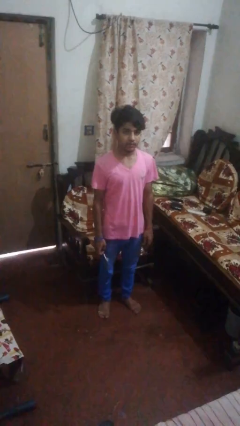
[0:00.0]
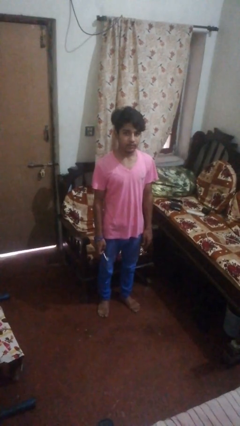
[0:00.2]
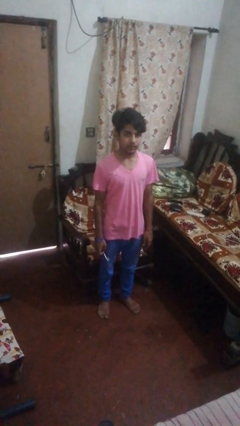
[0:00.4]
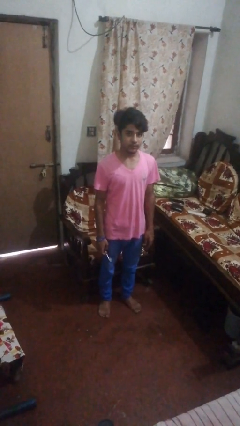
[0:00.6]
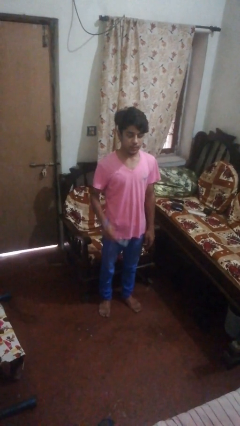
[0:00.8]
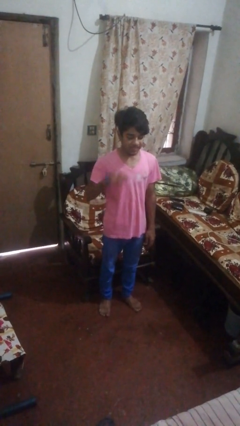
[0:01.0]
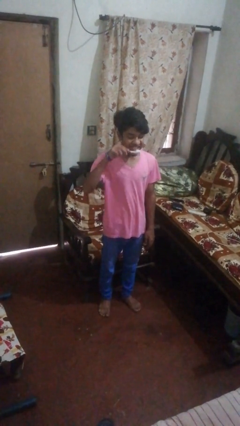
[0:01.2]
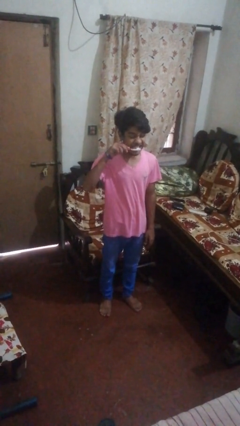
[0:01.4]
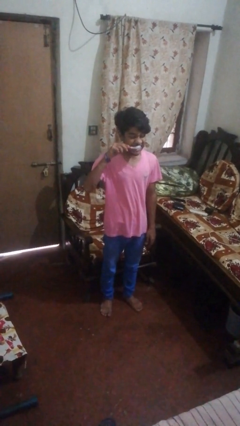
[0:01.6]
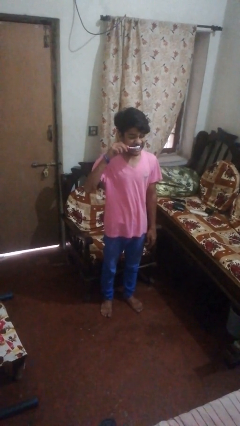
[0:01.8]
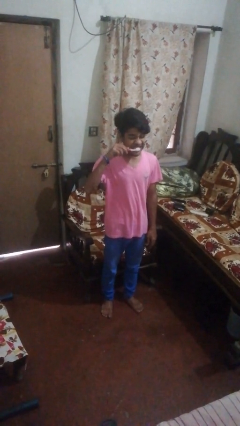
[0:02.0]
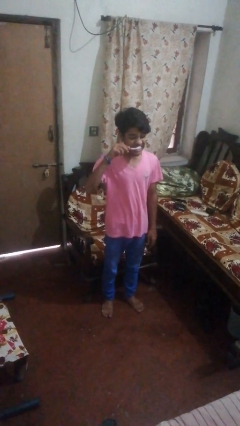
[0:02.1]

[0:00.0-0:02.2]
person brushes teeth

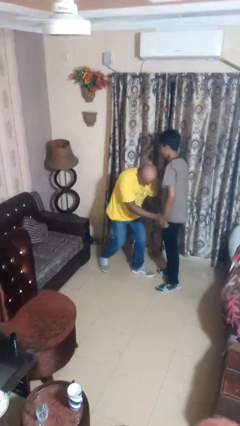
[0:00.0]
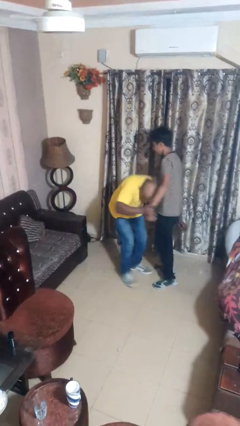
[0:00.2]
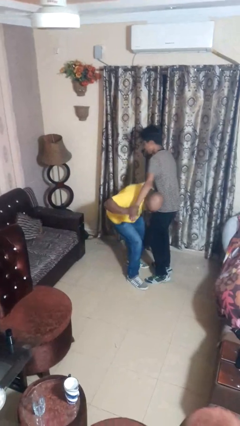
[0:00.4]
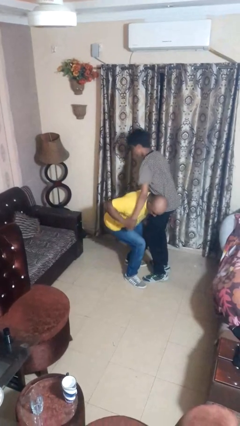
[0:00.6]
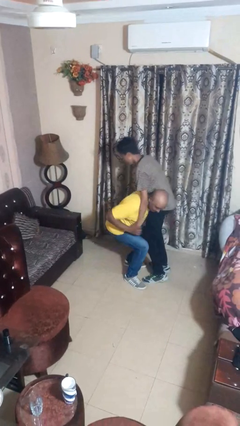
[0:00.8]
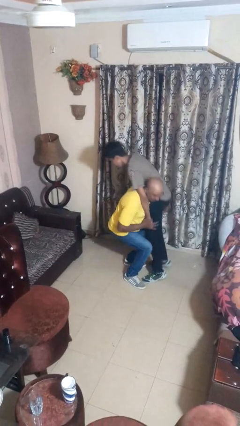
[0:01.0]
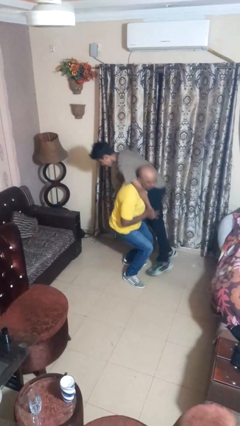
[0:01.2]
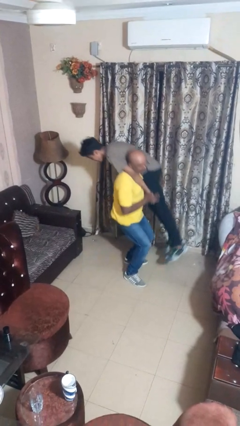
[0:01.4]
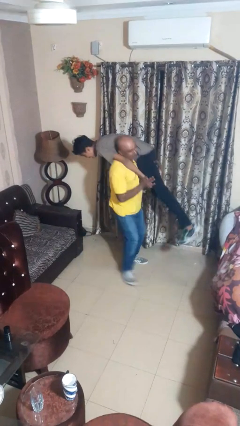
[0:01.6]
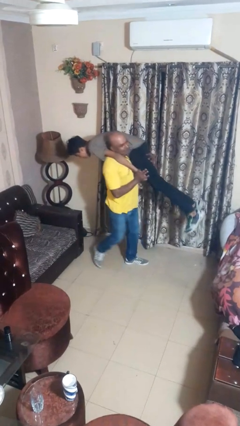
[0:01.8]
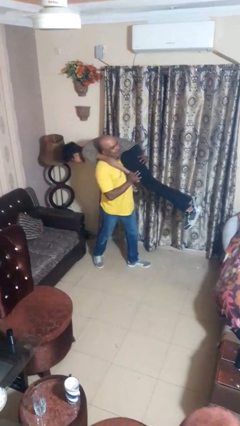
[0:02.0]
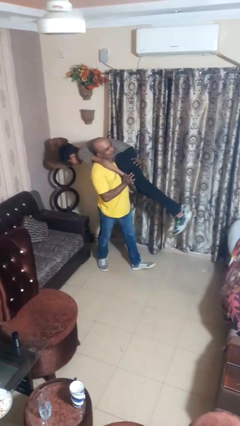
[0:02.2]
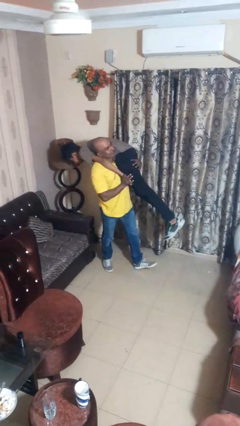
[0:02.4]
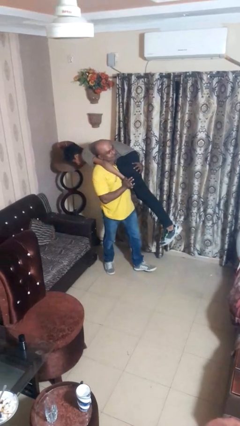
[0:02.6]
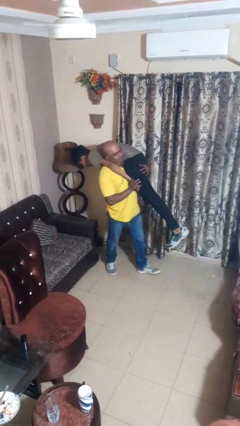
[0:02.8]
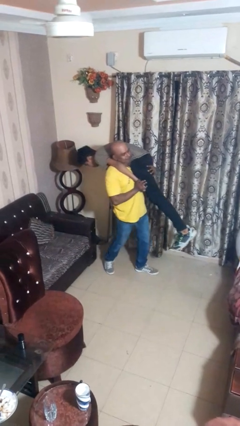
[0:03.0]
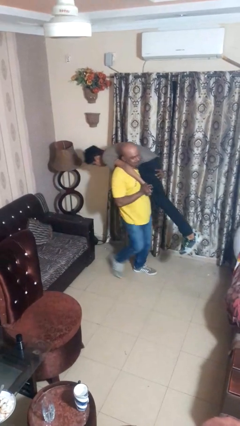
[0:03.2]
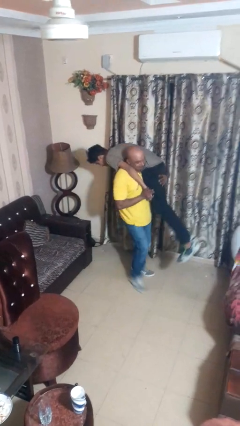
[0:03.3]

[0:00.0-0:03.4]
person carries person over shoulder

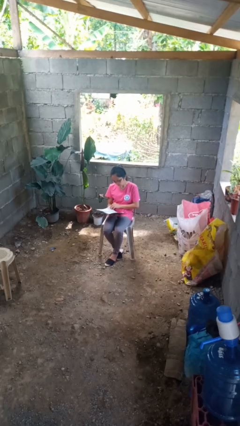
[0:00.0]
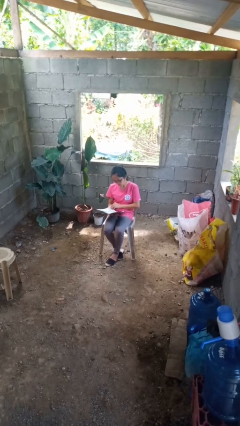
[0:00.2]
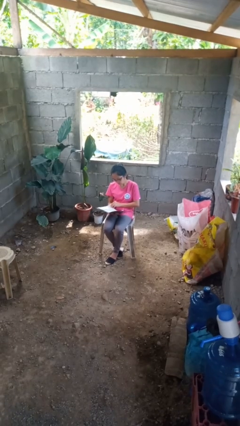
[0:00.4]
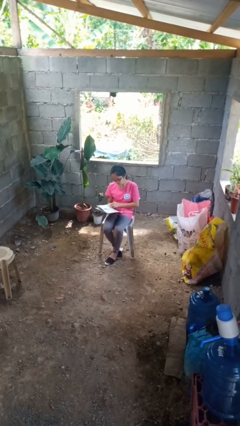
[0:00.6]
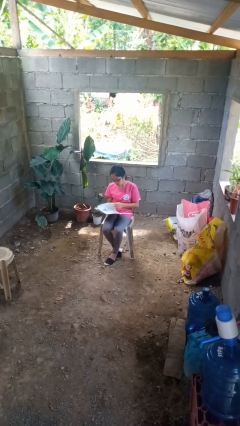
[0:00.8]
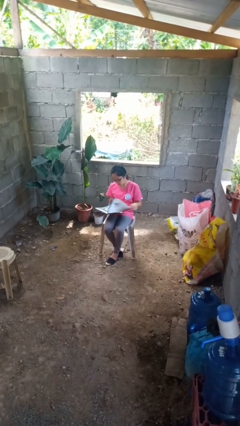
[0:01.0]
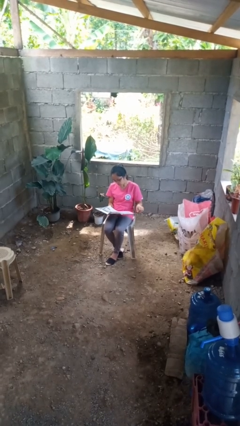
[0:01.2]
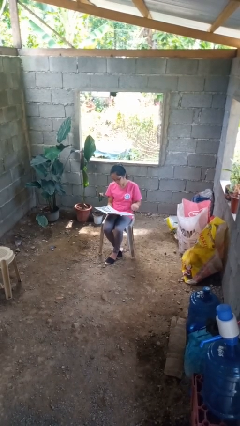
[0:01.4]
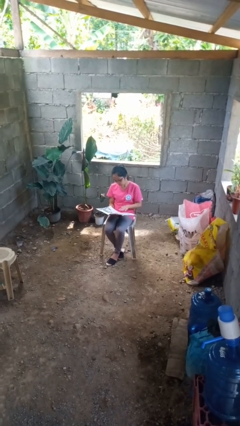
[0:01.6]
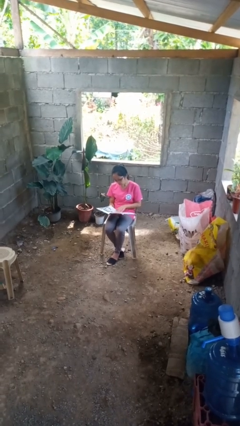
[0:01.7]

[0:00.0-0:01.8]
person reads magazine

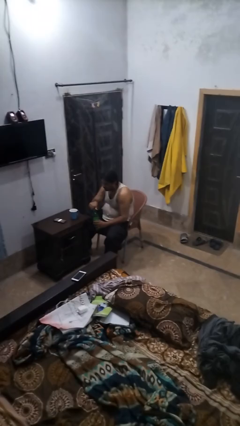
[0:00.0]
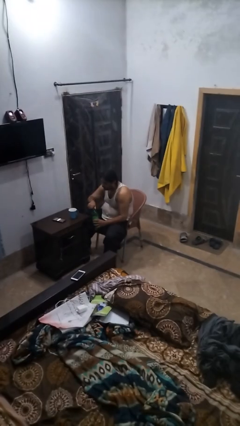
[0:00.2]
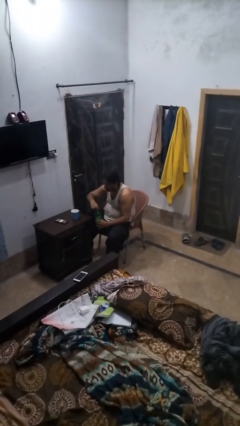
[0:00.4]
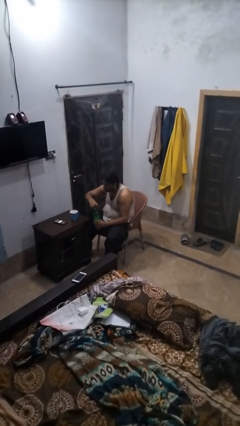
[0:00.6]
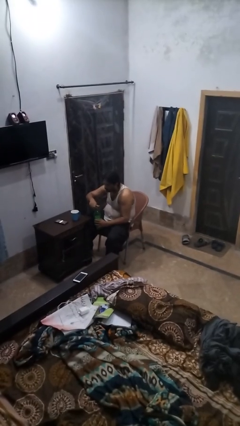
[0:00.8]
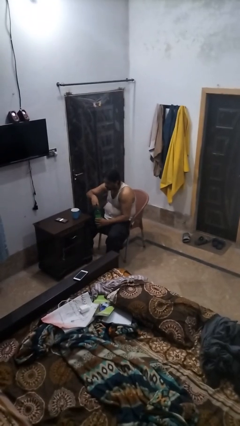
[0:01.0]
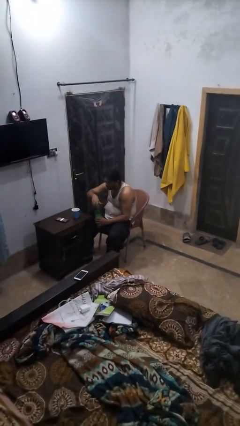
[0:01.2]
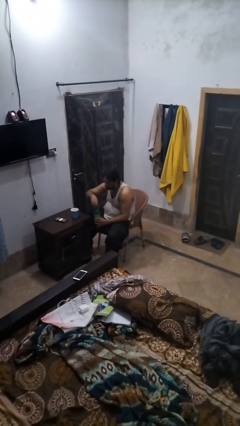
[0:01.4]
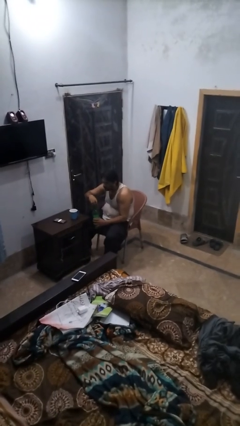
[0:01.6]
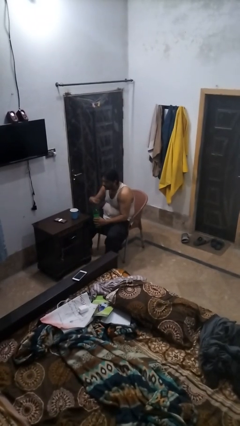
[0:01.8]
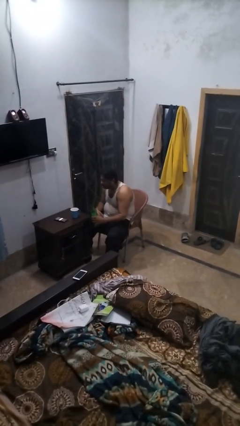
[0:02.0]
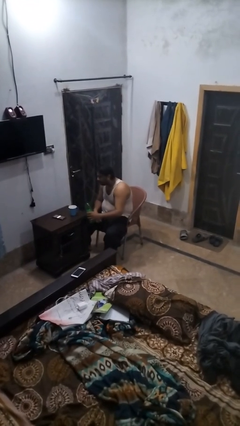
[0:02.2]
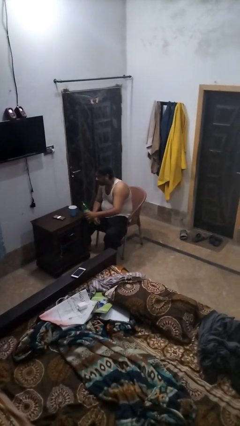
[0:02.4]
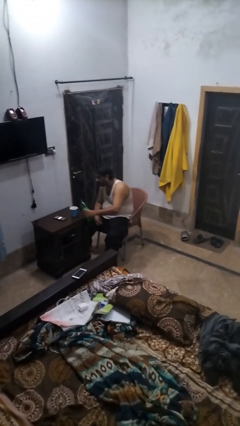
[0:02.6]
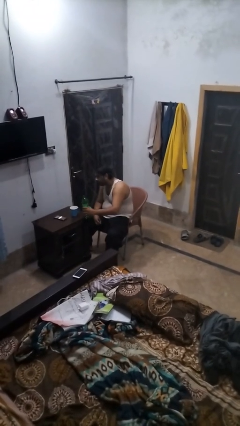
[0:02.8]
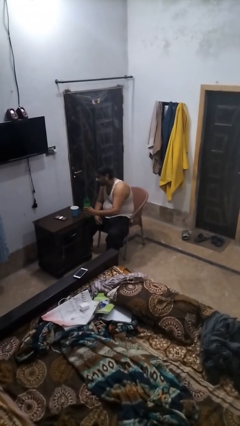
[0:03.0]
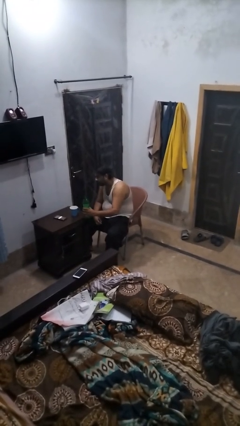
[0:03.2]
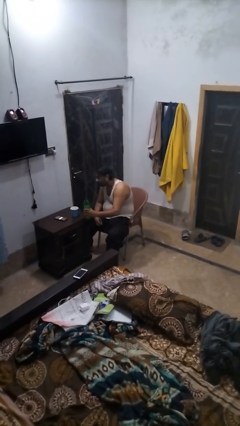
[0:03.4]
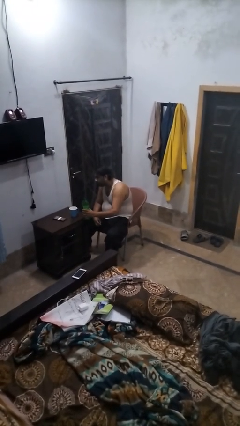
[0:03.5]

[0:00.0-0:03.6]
person unscrews lid from bottle

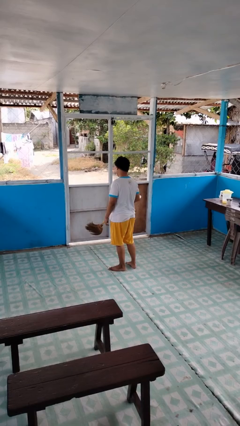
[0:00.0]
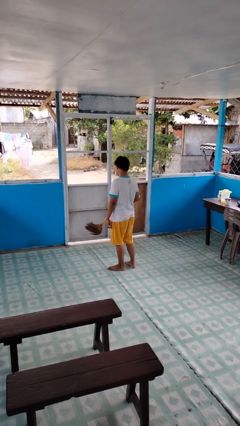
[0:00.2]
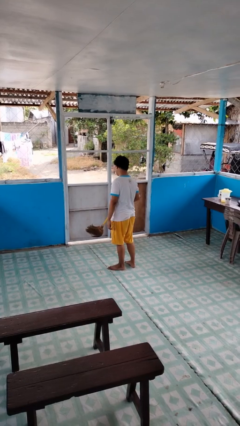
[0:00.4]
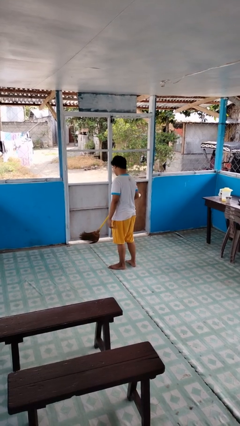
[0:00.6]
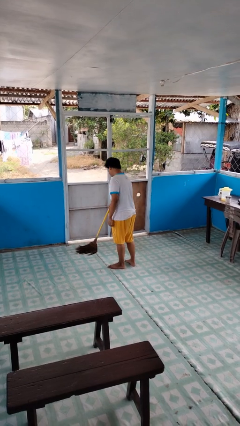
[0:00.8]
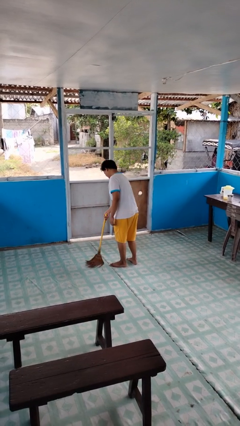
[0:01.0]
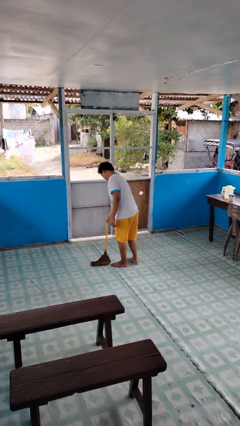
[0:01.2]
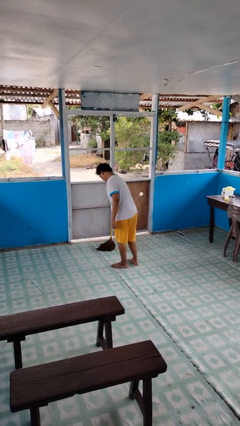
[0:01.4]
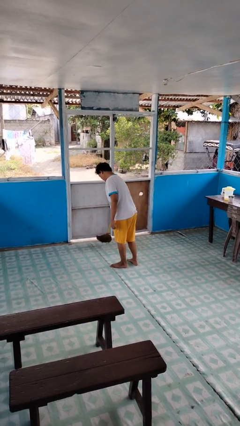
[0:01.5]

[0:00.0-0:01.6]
person sweeps floor

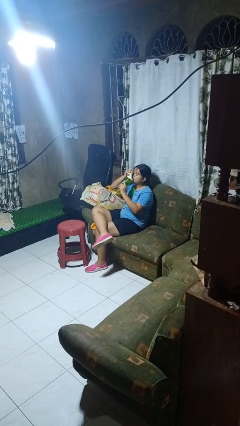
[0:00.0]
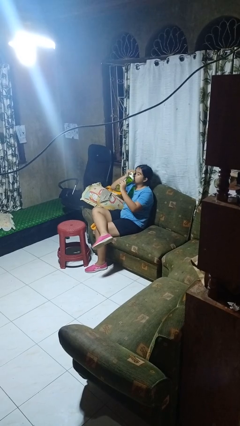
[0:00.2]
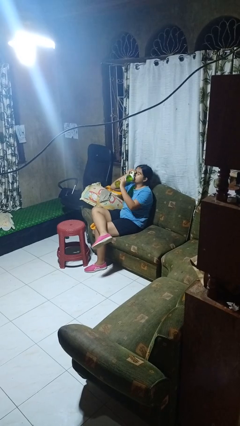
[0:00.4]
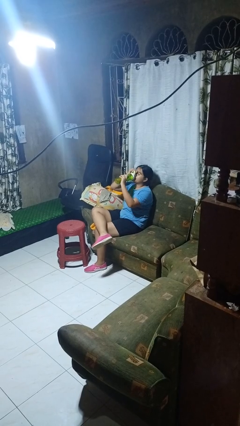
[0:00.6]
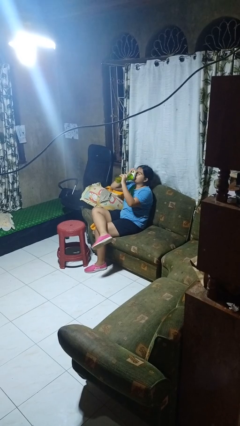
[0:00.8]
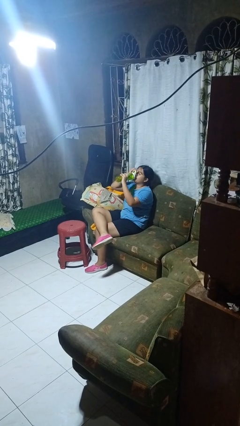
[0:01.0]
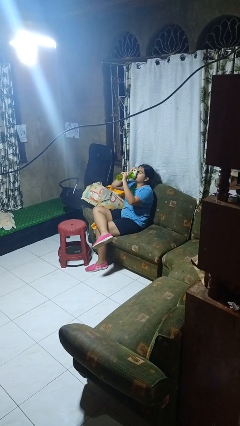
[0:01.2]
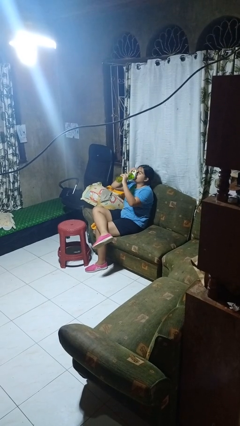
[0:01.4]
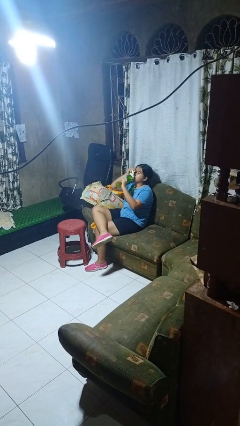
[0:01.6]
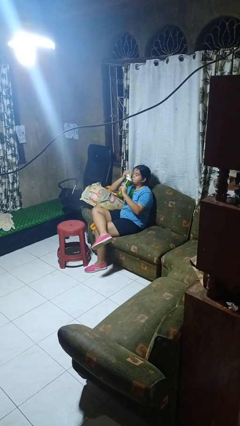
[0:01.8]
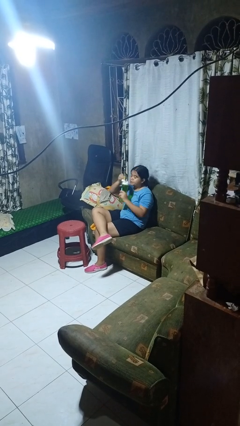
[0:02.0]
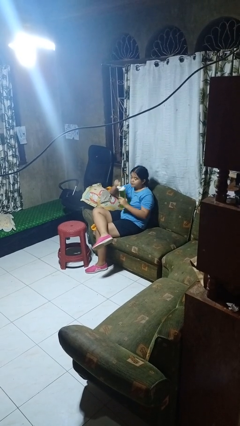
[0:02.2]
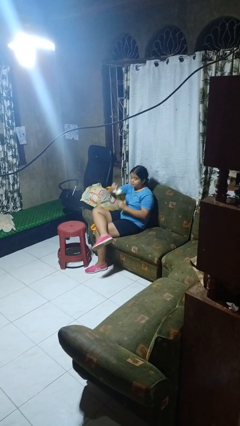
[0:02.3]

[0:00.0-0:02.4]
person drinks from bottle

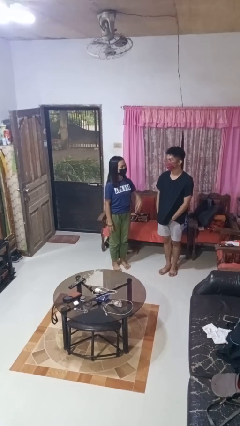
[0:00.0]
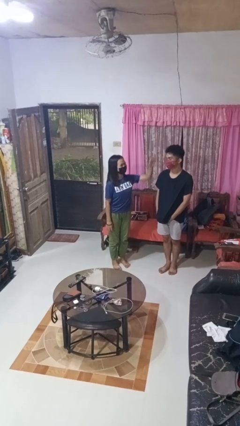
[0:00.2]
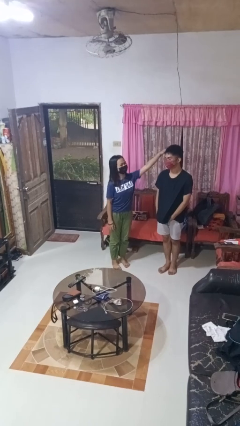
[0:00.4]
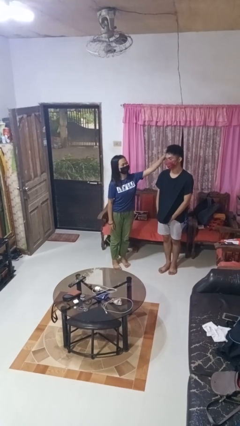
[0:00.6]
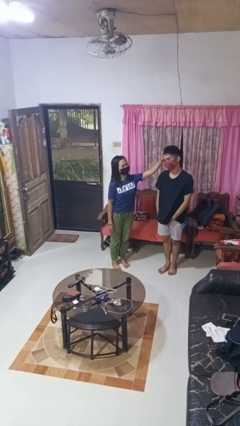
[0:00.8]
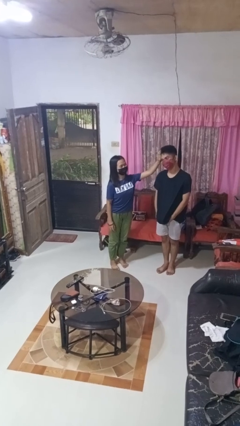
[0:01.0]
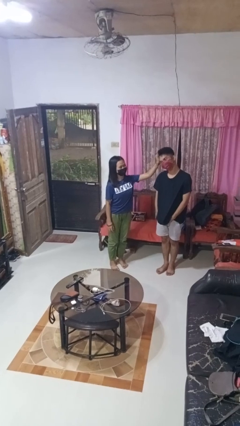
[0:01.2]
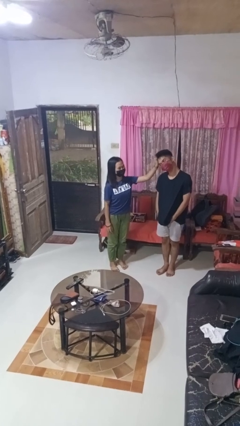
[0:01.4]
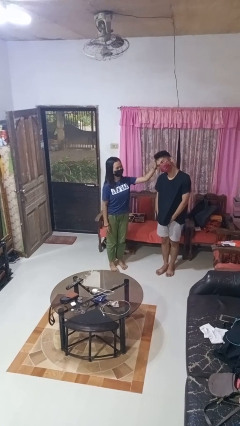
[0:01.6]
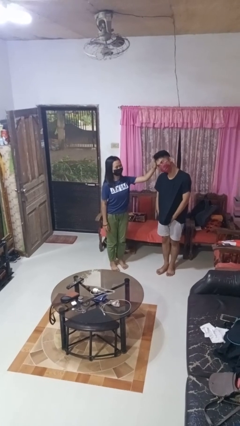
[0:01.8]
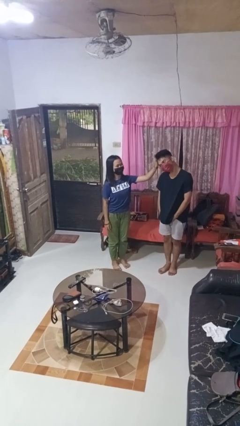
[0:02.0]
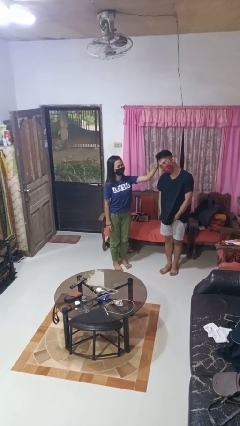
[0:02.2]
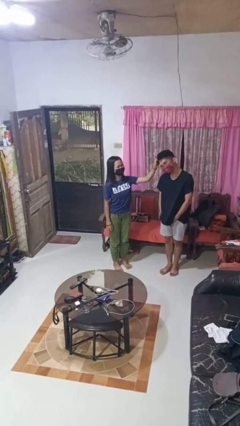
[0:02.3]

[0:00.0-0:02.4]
person grabs person by hair
